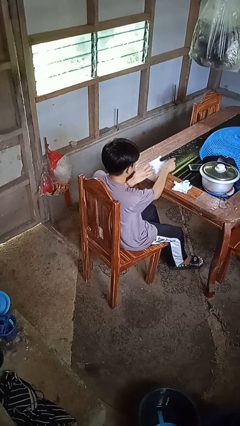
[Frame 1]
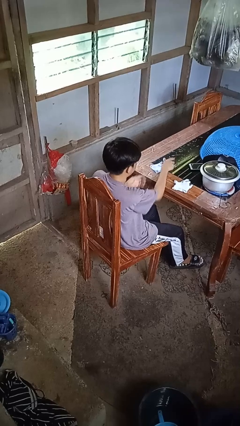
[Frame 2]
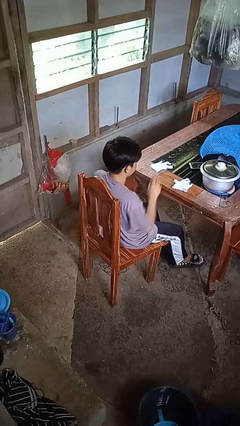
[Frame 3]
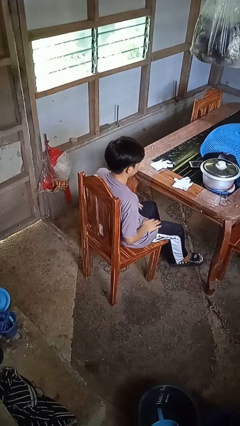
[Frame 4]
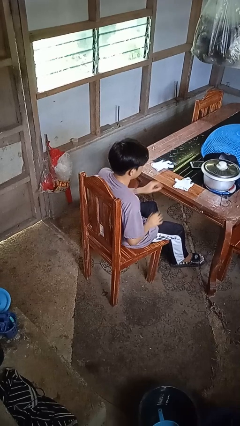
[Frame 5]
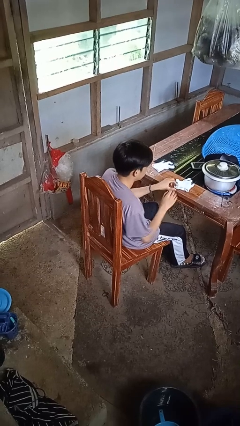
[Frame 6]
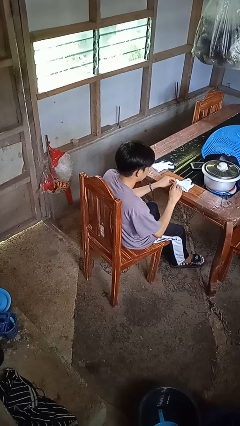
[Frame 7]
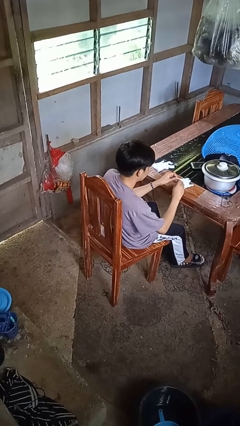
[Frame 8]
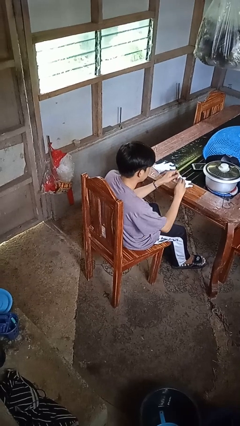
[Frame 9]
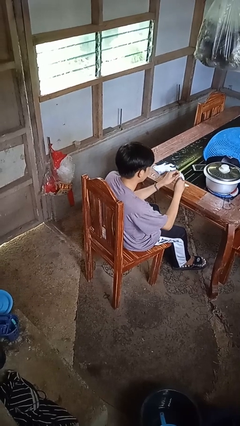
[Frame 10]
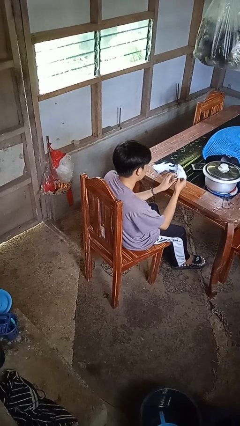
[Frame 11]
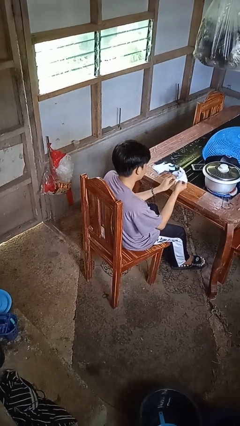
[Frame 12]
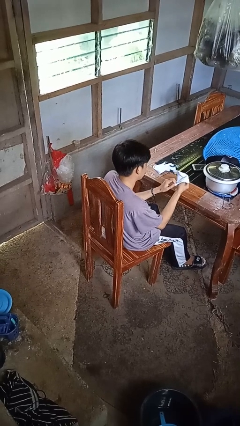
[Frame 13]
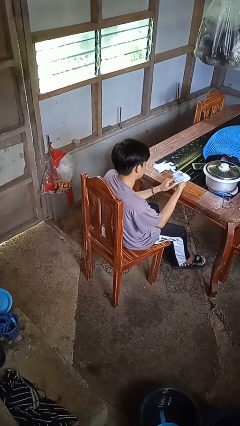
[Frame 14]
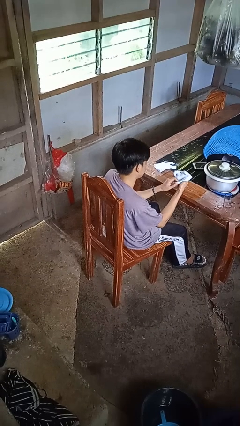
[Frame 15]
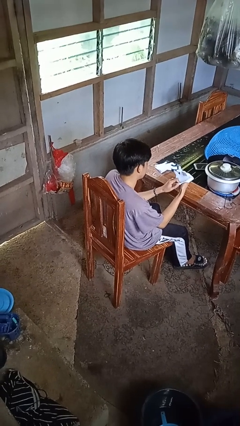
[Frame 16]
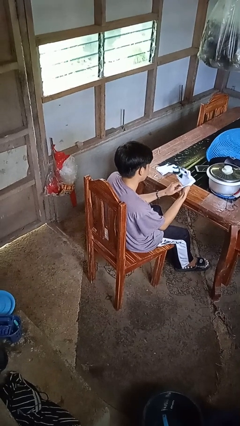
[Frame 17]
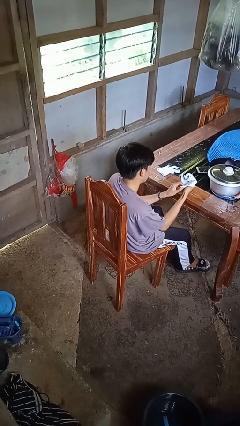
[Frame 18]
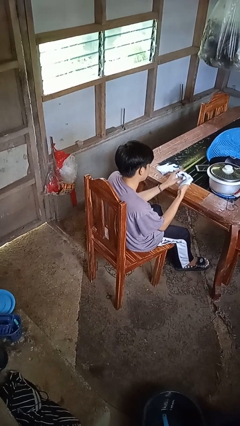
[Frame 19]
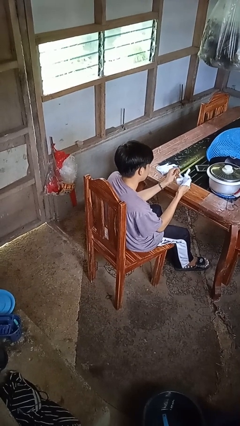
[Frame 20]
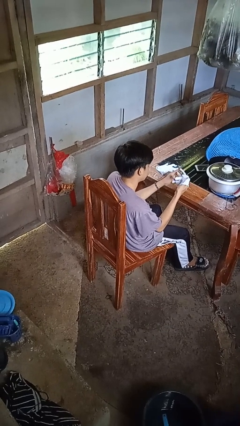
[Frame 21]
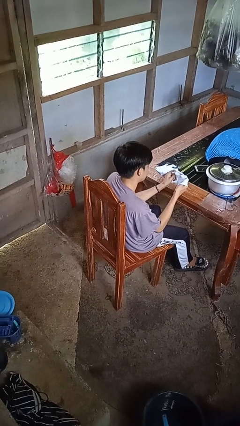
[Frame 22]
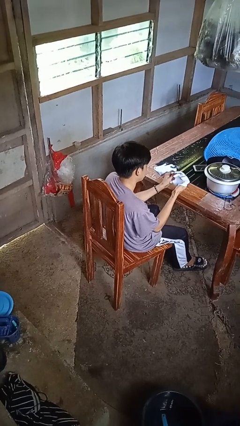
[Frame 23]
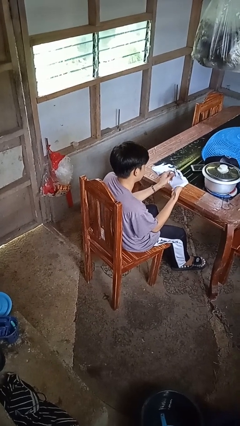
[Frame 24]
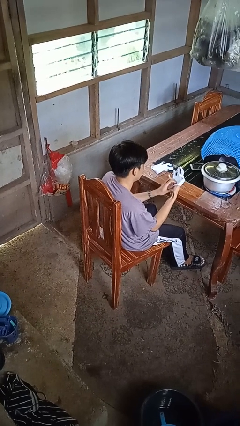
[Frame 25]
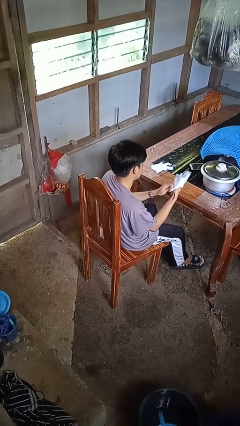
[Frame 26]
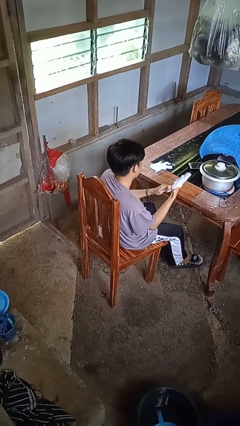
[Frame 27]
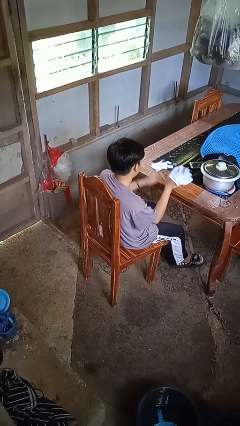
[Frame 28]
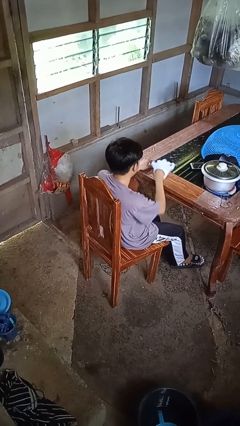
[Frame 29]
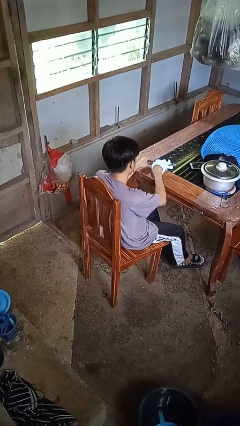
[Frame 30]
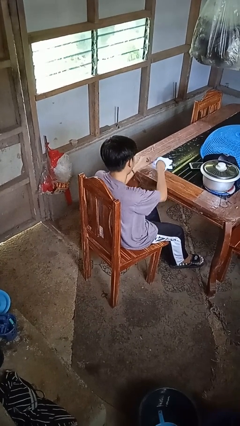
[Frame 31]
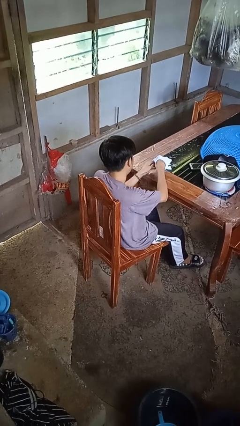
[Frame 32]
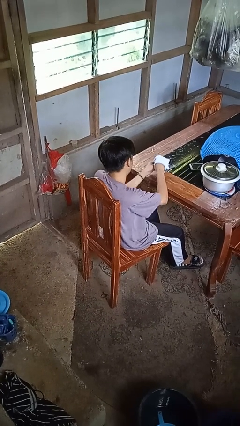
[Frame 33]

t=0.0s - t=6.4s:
person puts on gloves

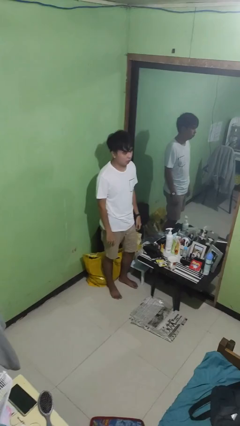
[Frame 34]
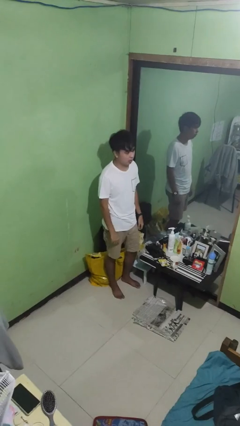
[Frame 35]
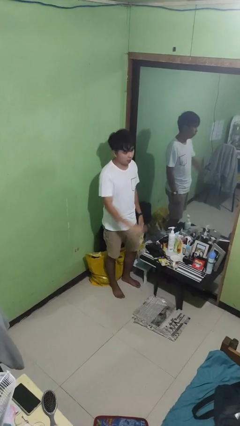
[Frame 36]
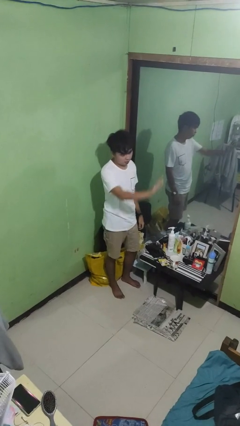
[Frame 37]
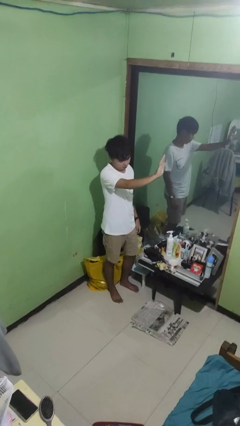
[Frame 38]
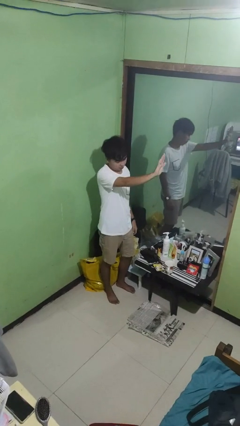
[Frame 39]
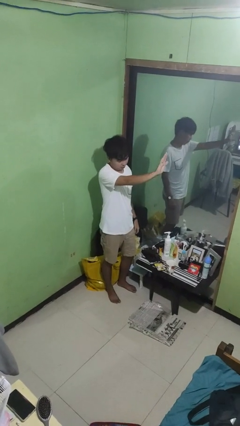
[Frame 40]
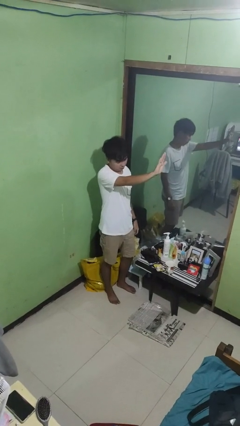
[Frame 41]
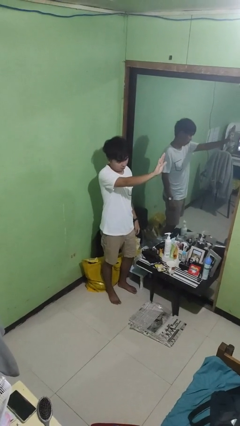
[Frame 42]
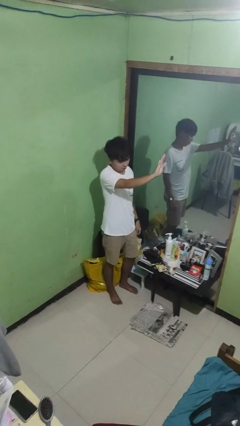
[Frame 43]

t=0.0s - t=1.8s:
person gestures stop

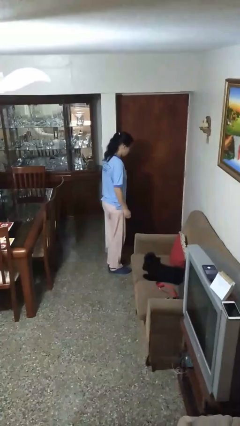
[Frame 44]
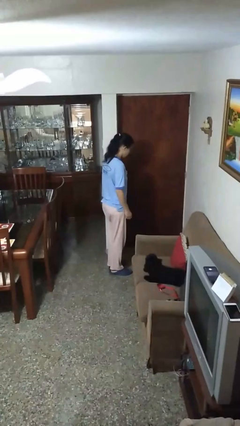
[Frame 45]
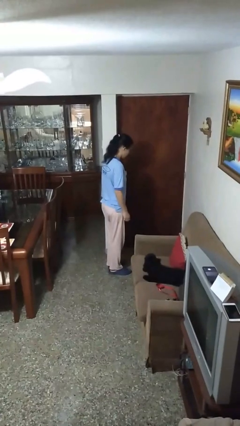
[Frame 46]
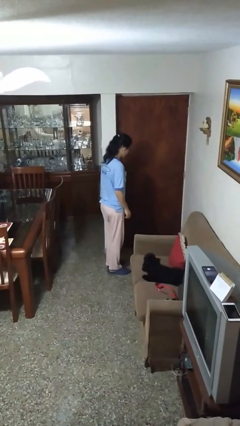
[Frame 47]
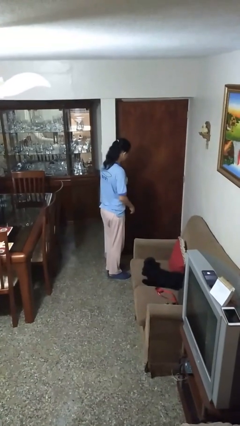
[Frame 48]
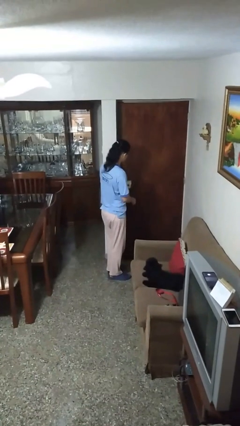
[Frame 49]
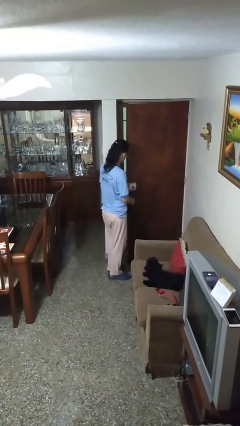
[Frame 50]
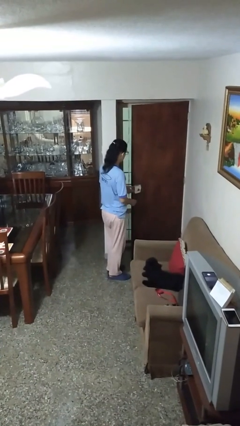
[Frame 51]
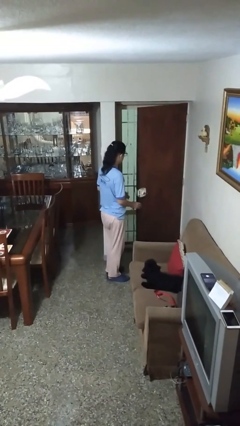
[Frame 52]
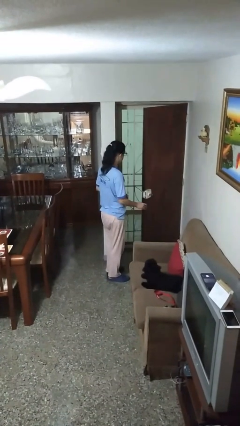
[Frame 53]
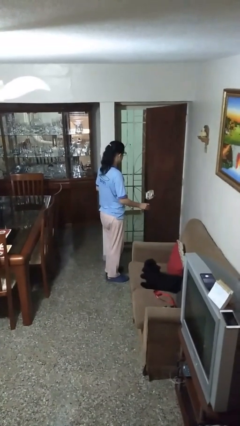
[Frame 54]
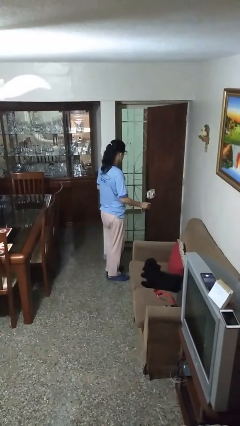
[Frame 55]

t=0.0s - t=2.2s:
person opens facility door

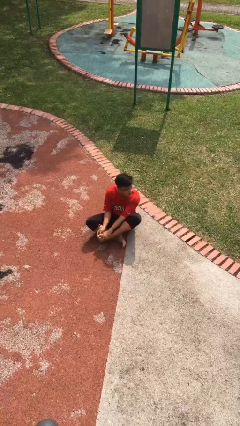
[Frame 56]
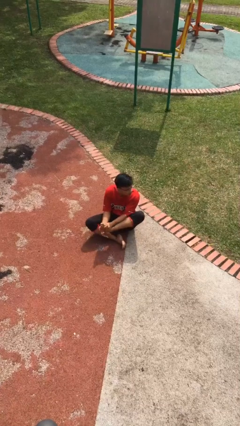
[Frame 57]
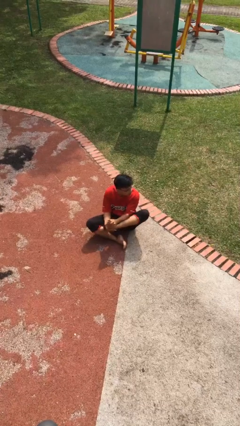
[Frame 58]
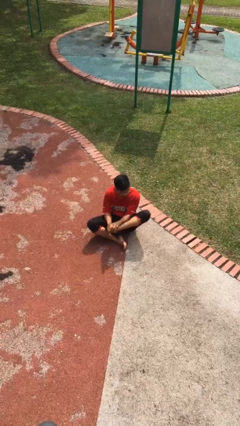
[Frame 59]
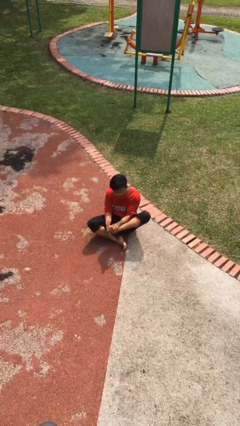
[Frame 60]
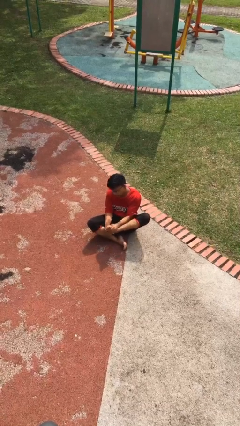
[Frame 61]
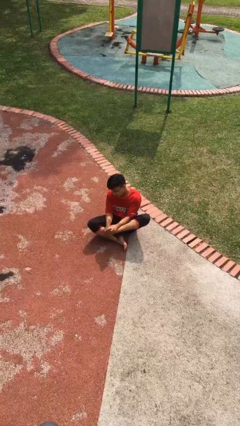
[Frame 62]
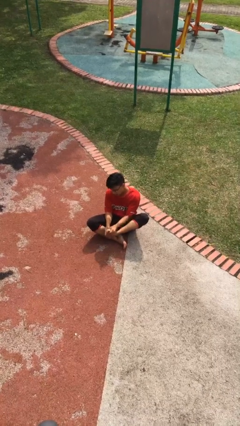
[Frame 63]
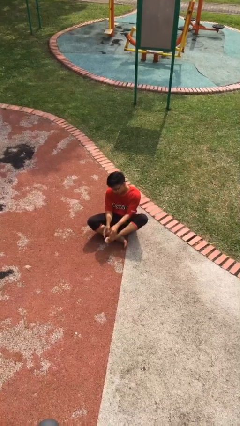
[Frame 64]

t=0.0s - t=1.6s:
person rubs foot

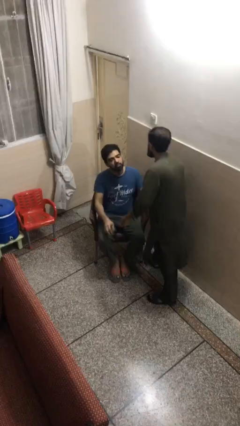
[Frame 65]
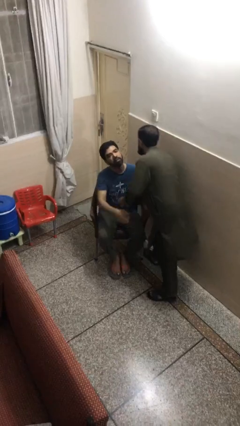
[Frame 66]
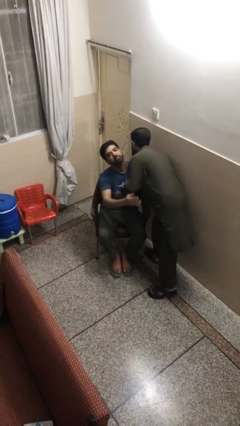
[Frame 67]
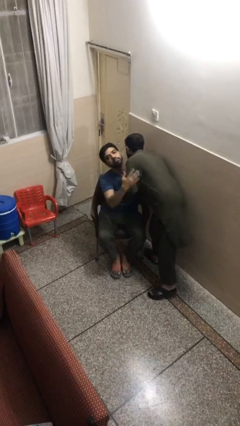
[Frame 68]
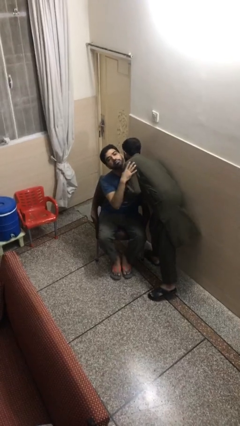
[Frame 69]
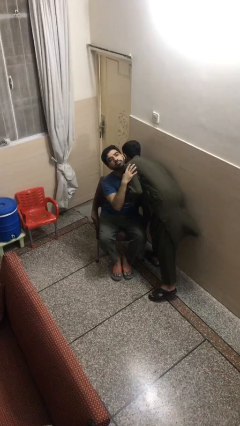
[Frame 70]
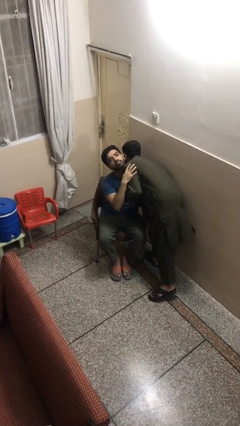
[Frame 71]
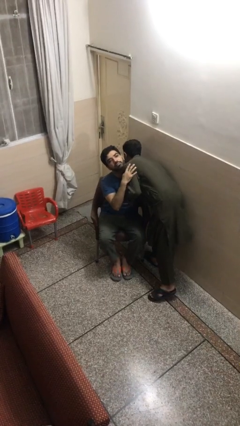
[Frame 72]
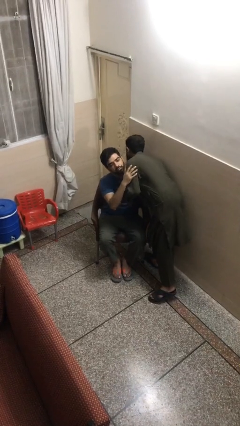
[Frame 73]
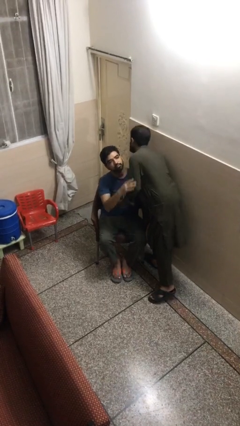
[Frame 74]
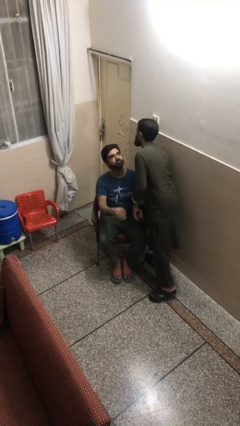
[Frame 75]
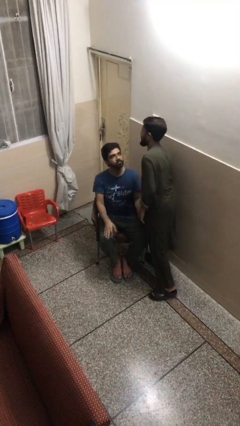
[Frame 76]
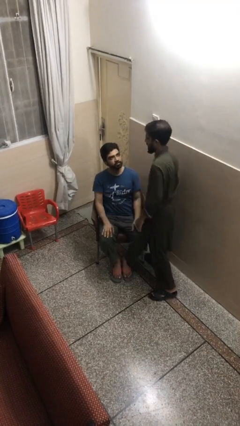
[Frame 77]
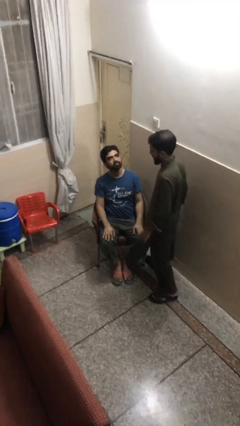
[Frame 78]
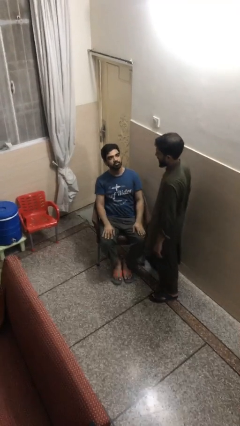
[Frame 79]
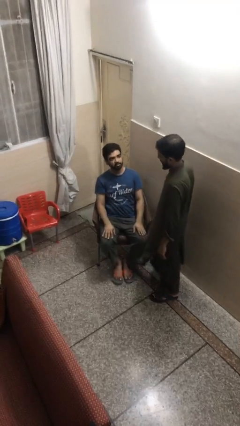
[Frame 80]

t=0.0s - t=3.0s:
person embraces person

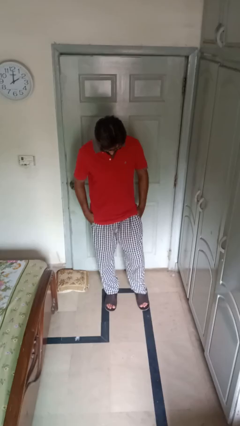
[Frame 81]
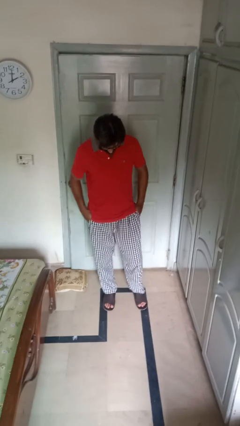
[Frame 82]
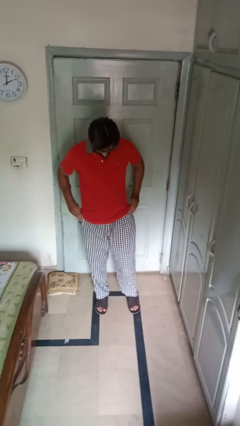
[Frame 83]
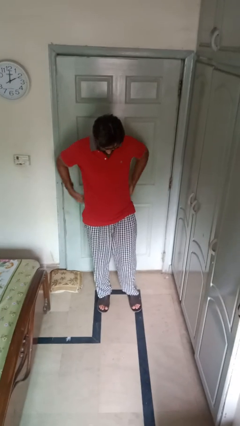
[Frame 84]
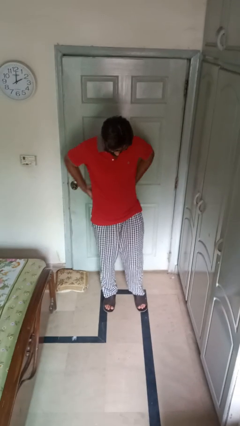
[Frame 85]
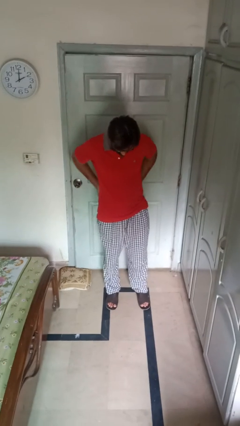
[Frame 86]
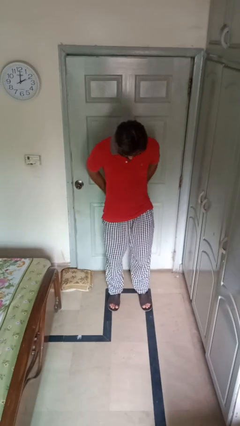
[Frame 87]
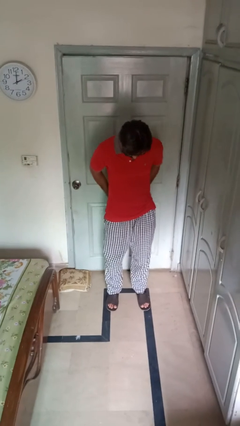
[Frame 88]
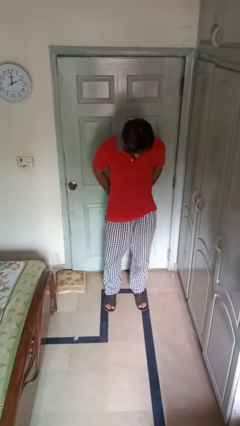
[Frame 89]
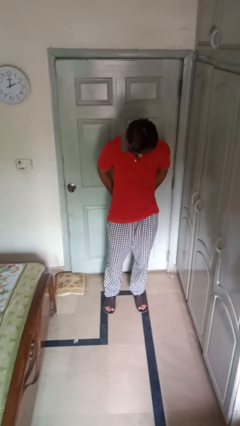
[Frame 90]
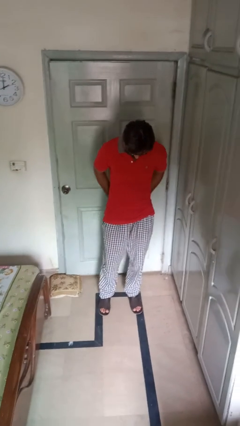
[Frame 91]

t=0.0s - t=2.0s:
person puts hands in back pockets

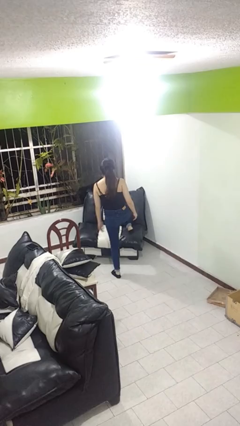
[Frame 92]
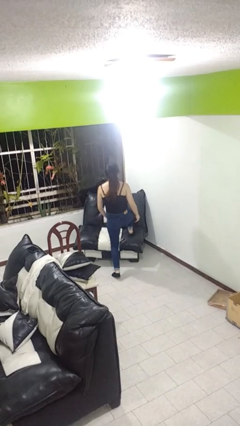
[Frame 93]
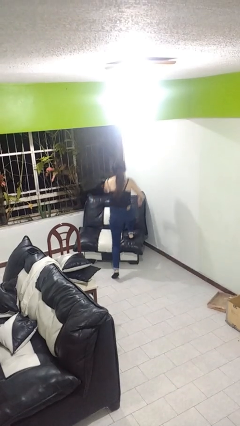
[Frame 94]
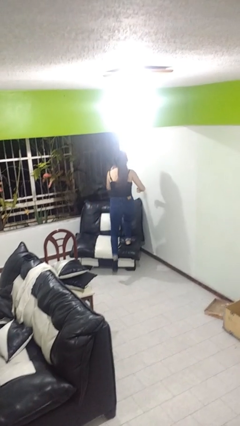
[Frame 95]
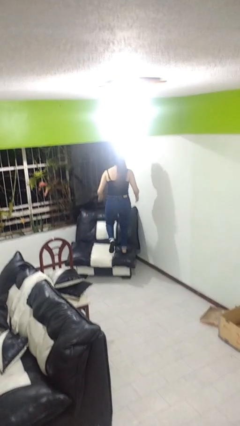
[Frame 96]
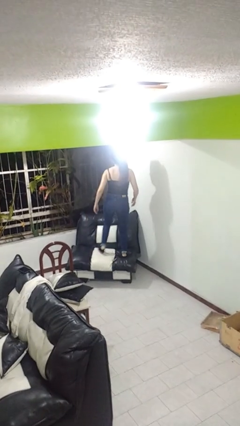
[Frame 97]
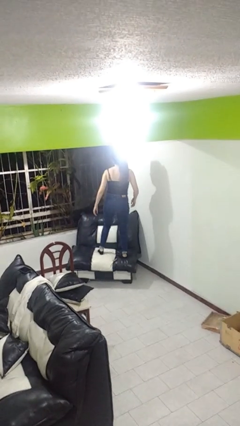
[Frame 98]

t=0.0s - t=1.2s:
person climbs on couch
